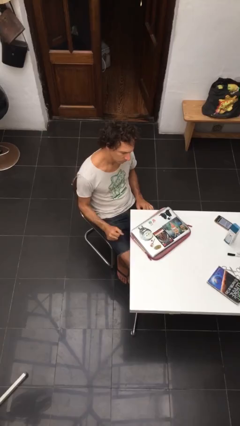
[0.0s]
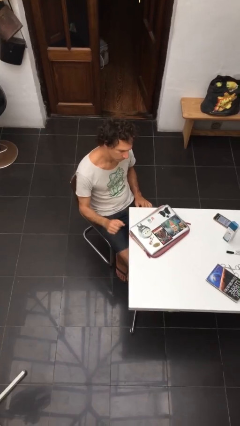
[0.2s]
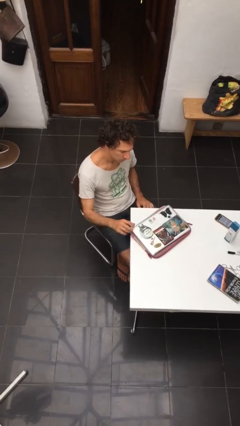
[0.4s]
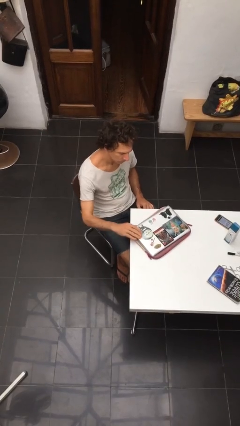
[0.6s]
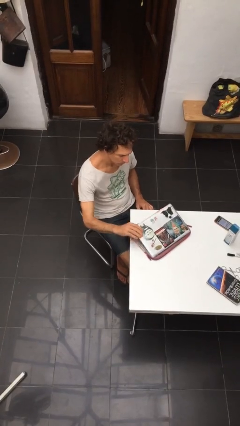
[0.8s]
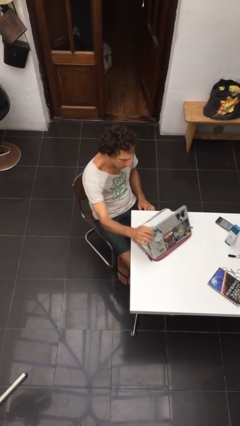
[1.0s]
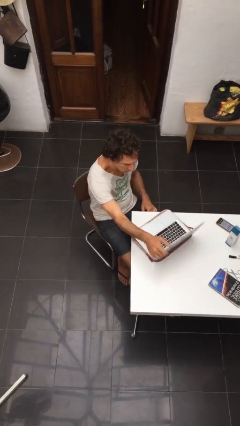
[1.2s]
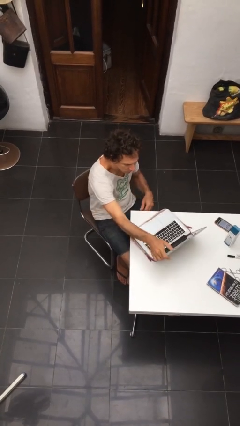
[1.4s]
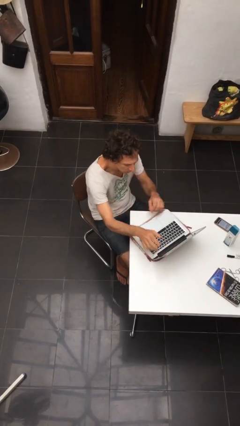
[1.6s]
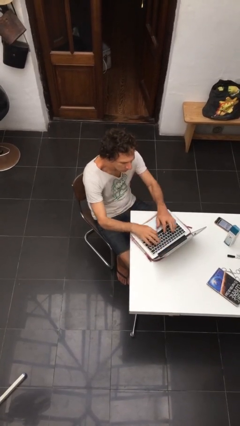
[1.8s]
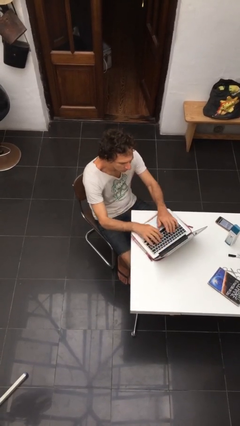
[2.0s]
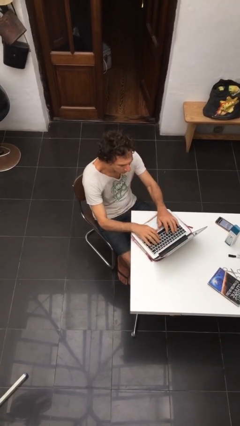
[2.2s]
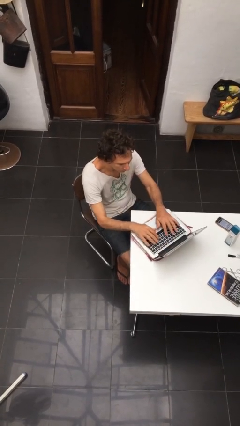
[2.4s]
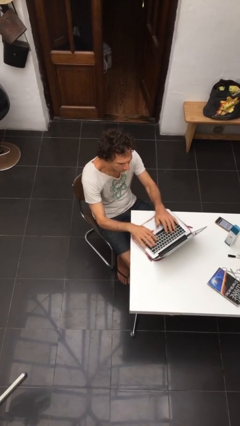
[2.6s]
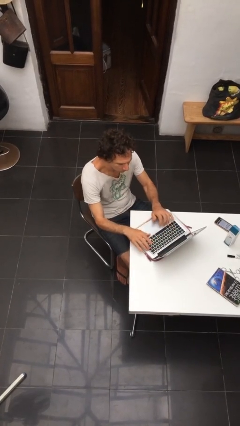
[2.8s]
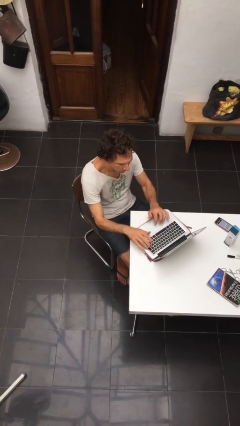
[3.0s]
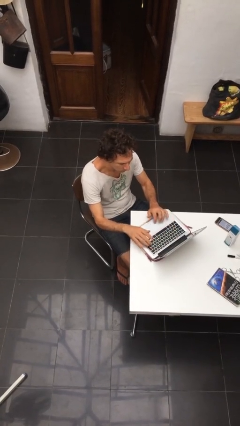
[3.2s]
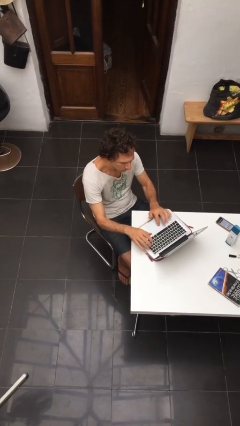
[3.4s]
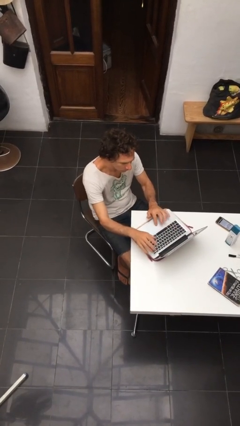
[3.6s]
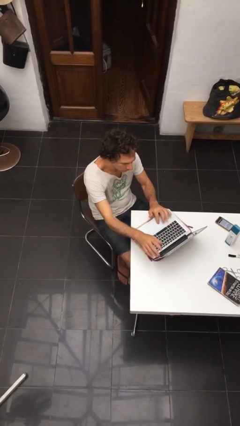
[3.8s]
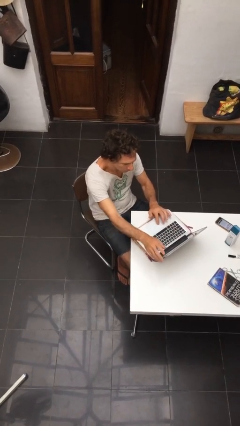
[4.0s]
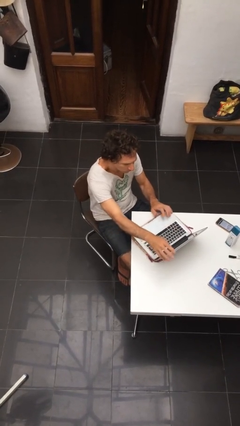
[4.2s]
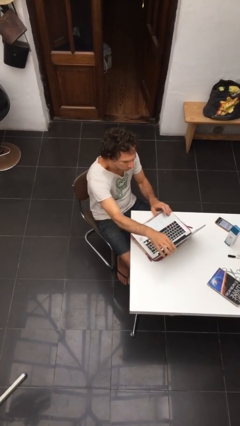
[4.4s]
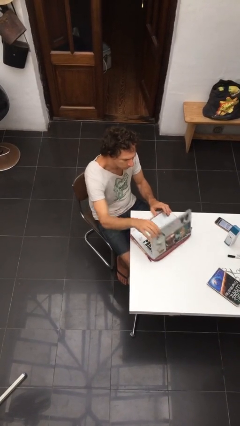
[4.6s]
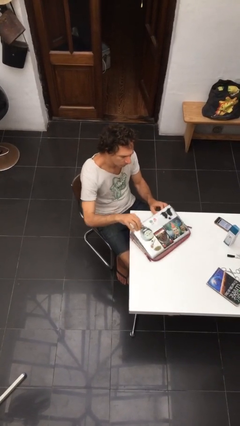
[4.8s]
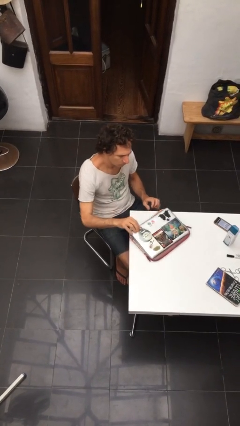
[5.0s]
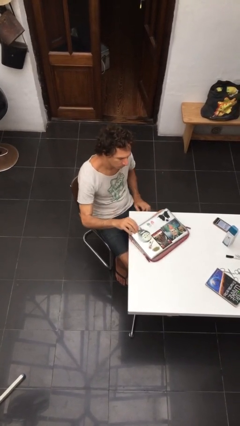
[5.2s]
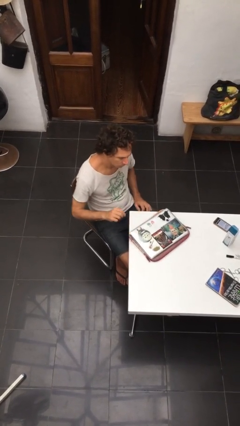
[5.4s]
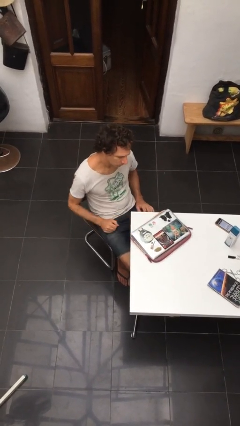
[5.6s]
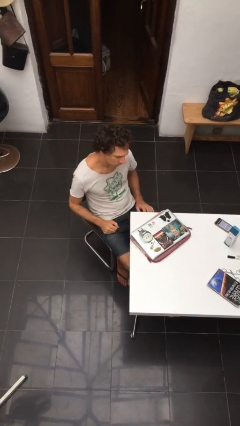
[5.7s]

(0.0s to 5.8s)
person interacts with laptop

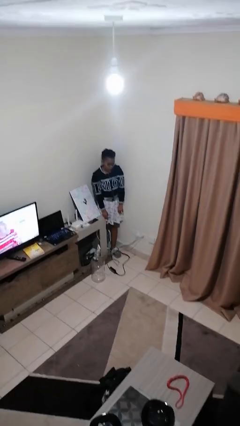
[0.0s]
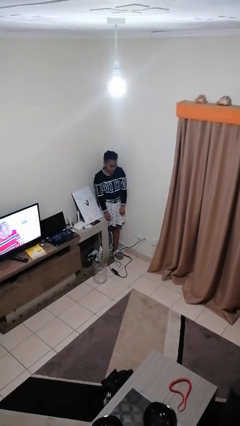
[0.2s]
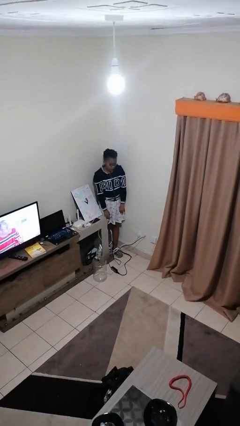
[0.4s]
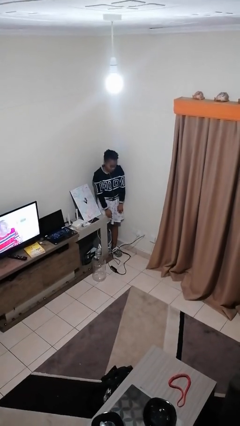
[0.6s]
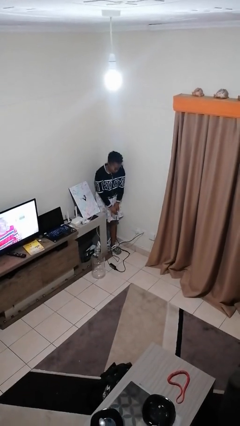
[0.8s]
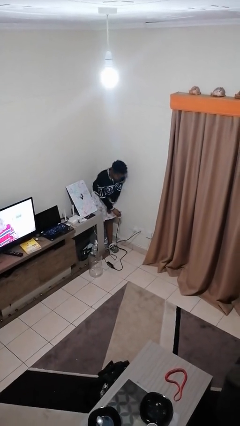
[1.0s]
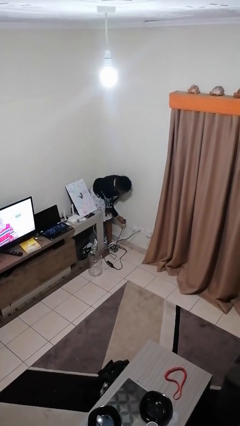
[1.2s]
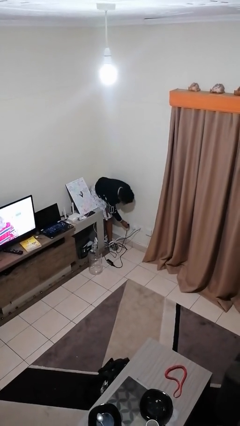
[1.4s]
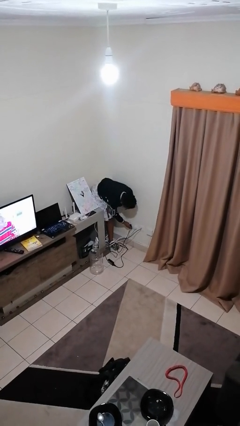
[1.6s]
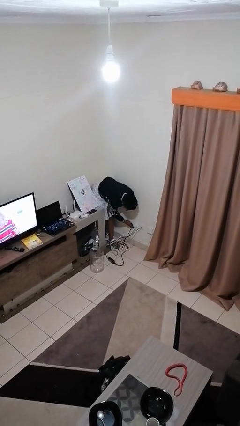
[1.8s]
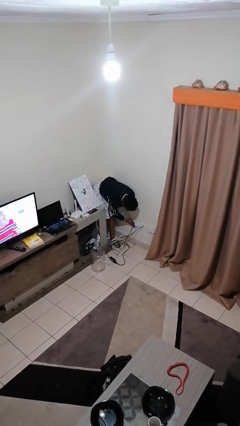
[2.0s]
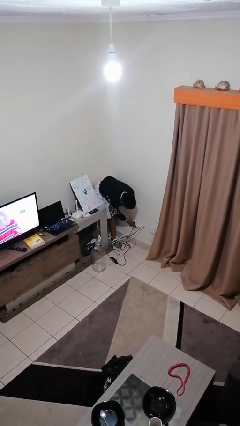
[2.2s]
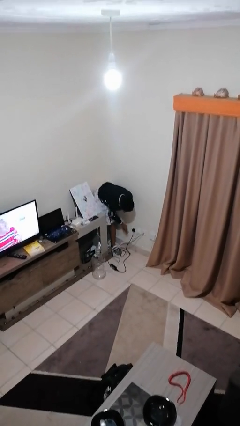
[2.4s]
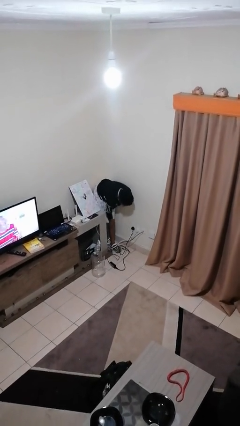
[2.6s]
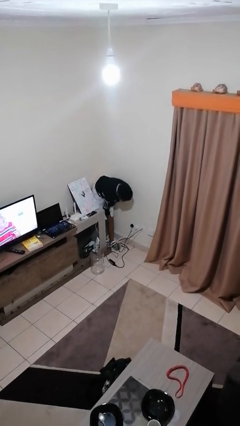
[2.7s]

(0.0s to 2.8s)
person plugs into electrical socket

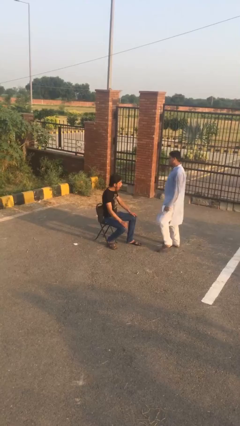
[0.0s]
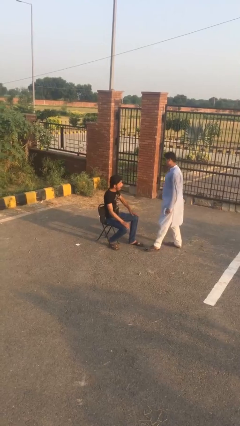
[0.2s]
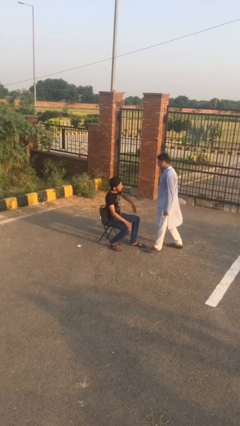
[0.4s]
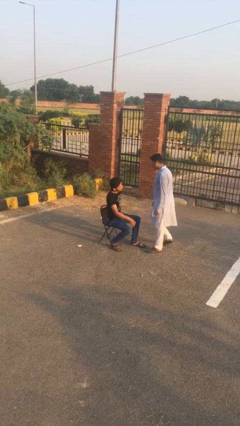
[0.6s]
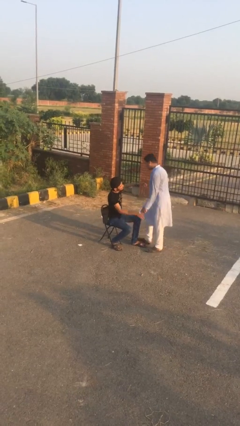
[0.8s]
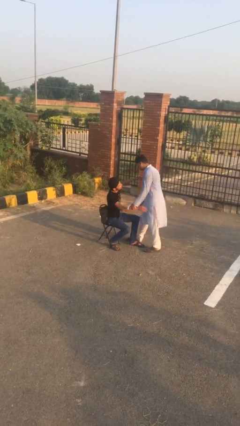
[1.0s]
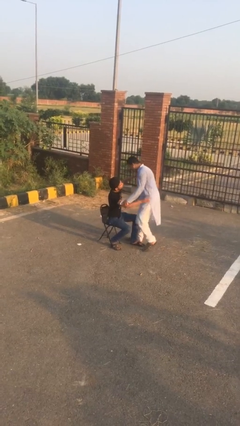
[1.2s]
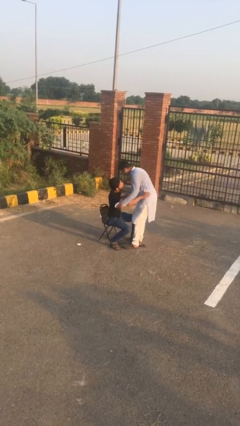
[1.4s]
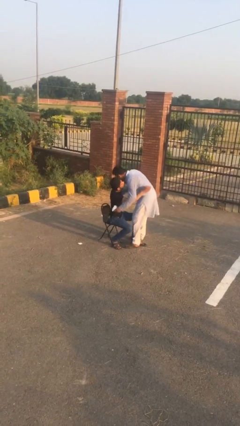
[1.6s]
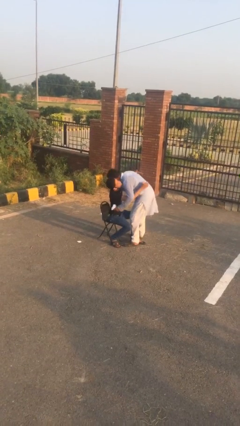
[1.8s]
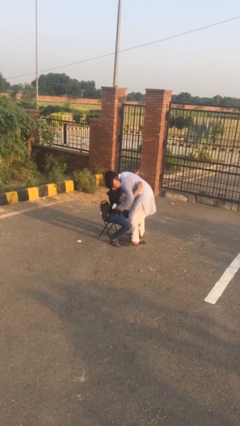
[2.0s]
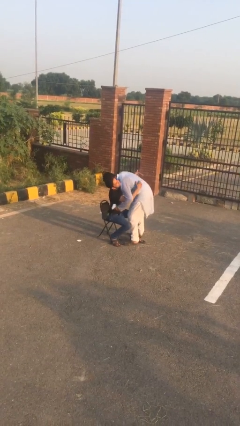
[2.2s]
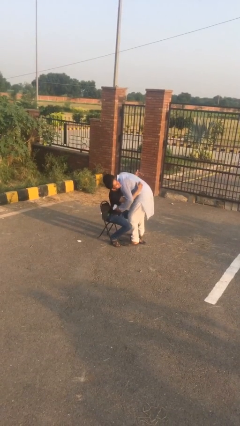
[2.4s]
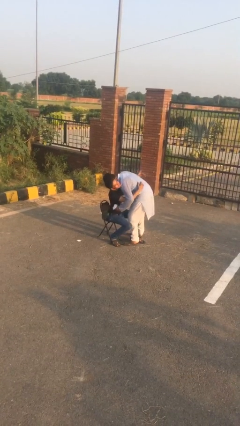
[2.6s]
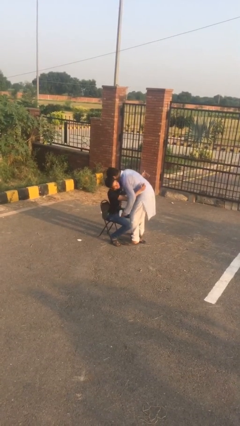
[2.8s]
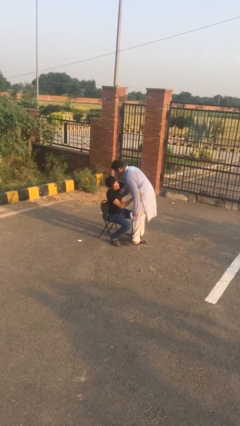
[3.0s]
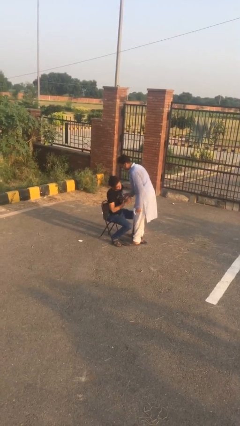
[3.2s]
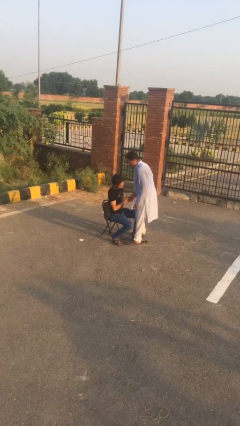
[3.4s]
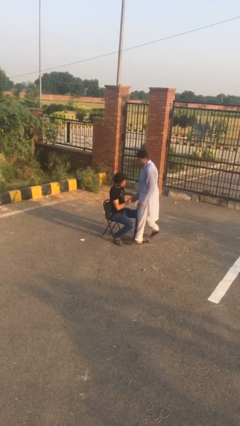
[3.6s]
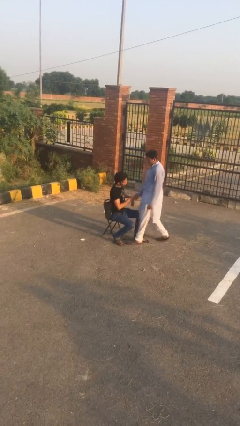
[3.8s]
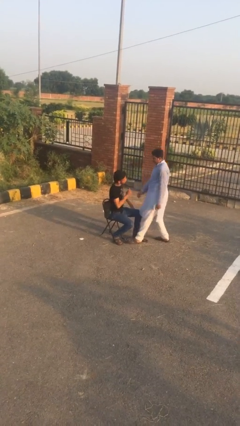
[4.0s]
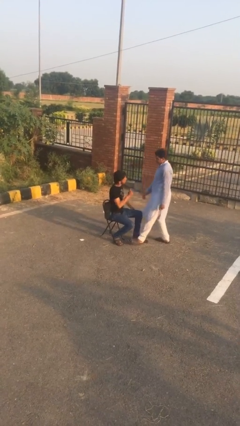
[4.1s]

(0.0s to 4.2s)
person embraces person

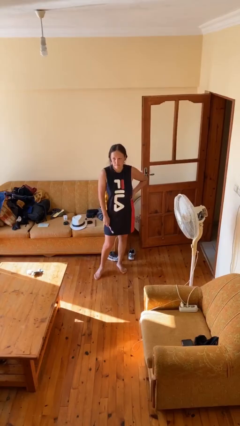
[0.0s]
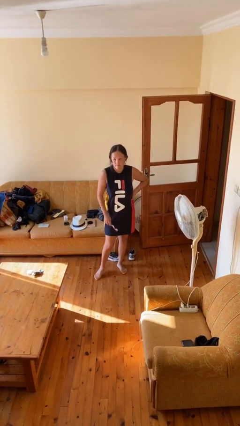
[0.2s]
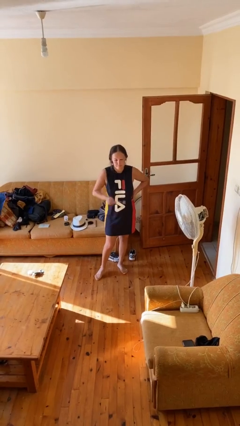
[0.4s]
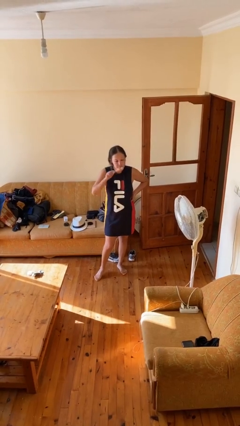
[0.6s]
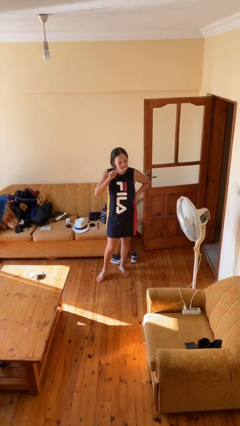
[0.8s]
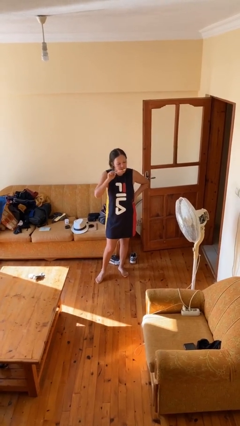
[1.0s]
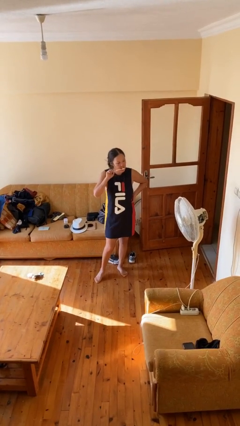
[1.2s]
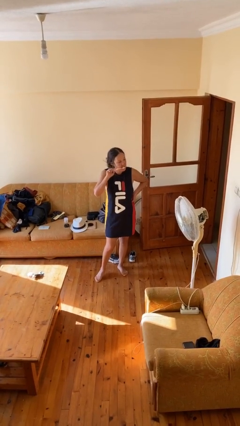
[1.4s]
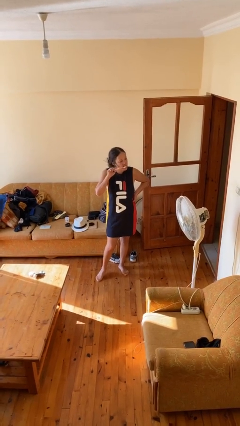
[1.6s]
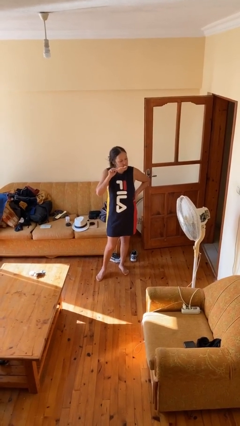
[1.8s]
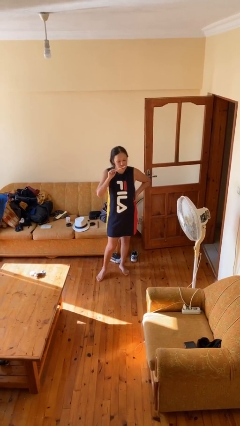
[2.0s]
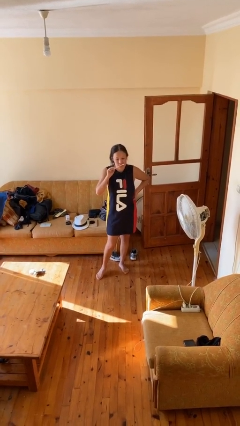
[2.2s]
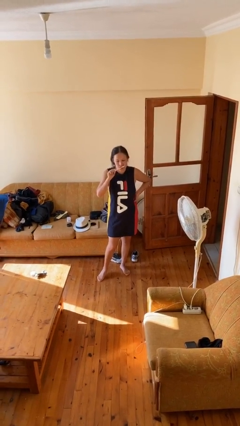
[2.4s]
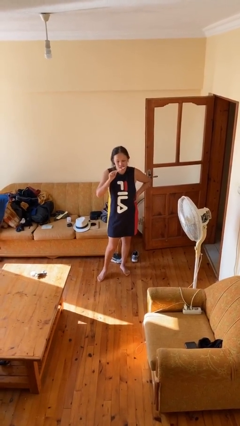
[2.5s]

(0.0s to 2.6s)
person brushes teeth

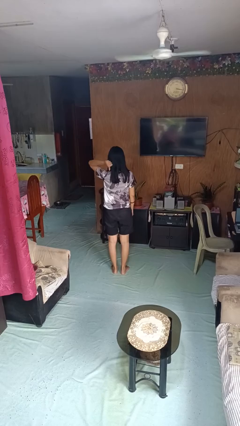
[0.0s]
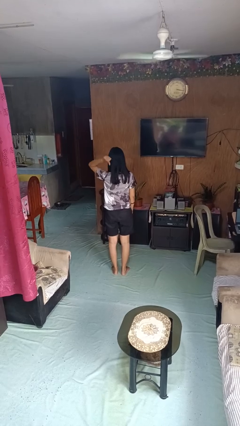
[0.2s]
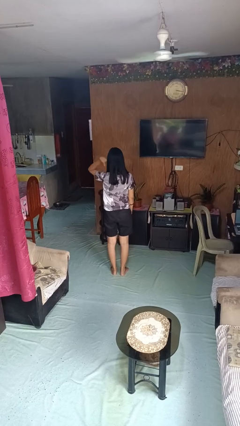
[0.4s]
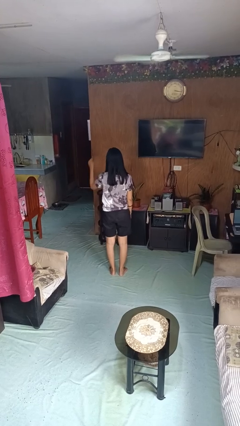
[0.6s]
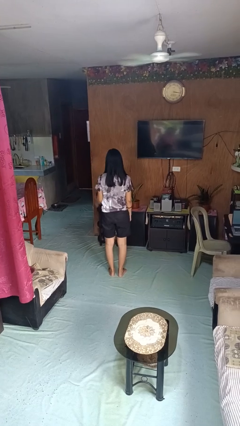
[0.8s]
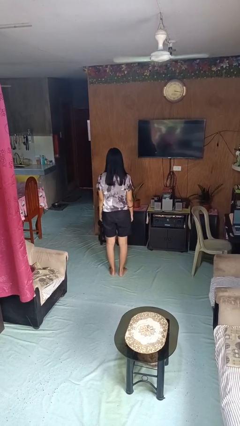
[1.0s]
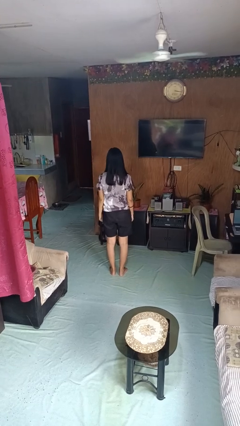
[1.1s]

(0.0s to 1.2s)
person gestures behind me

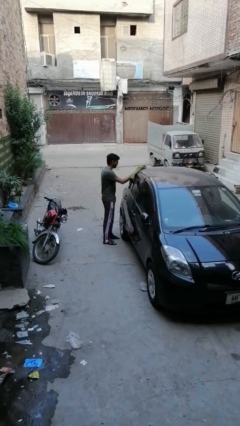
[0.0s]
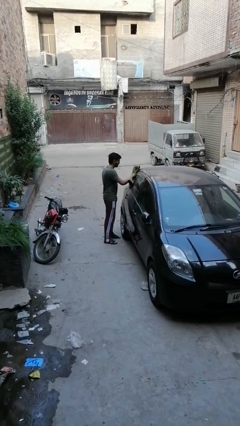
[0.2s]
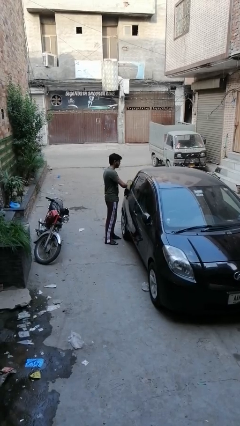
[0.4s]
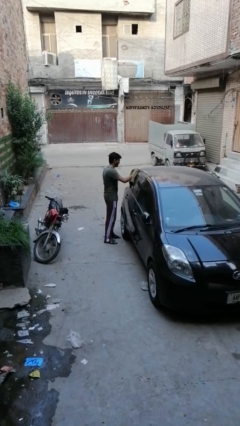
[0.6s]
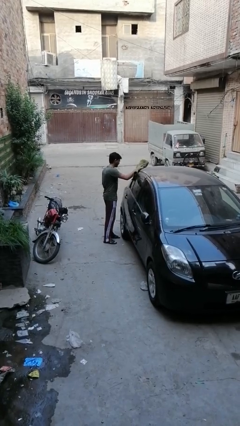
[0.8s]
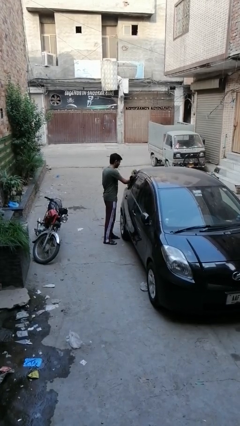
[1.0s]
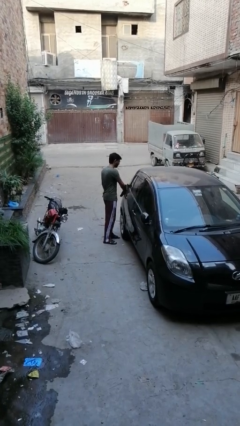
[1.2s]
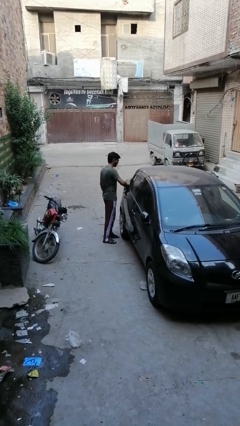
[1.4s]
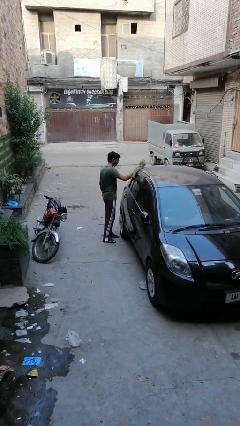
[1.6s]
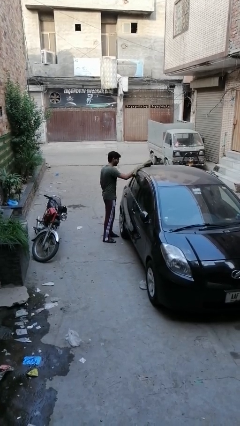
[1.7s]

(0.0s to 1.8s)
person polishes car with rag
